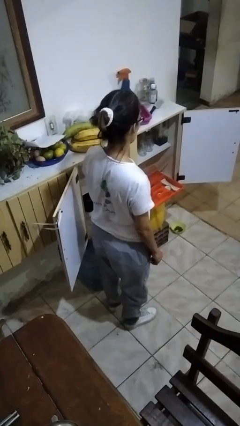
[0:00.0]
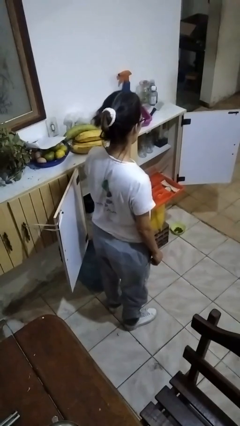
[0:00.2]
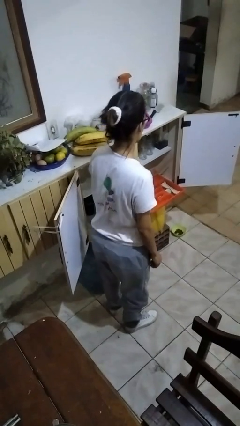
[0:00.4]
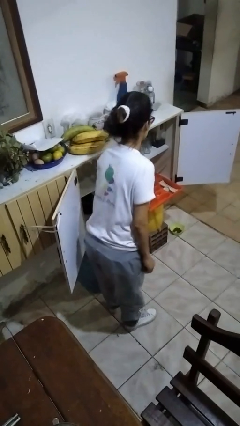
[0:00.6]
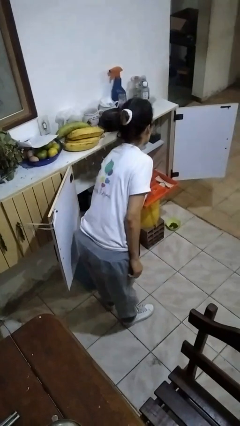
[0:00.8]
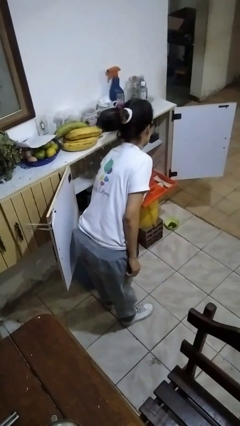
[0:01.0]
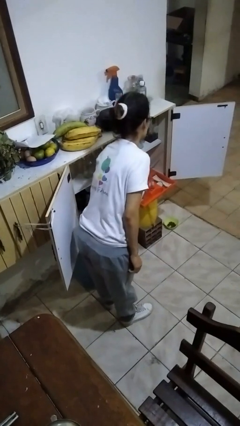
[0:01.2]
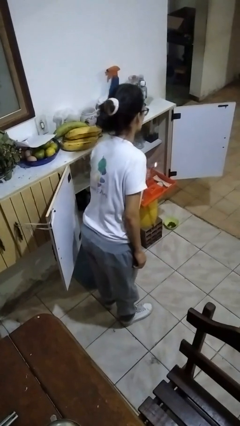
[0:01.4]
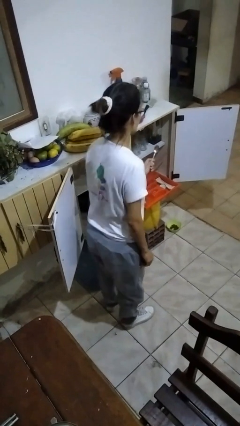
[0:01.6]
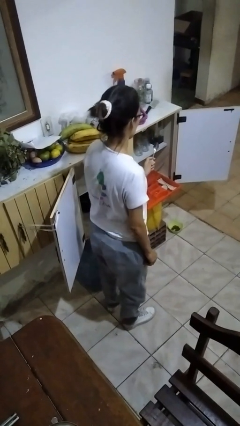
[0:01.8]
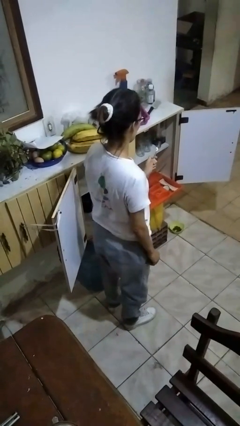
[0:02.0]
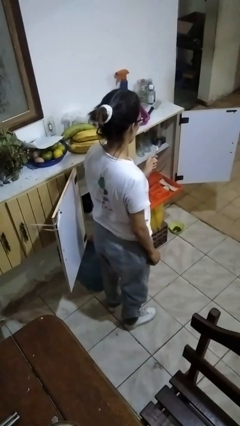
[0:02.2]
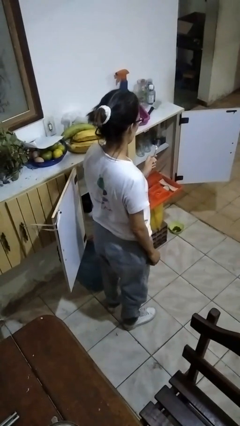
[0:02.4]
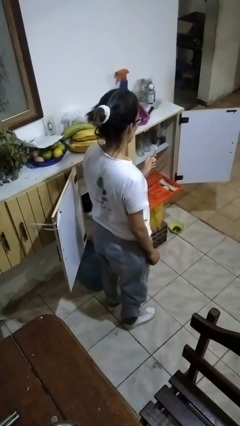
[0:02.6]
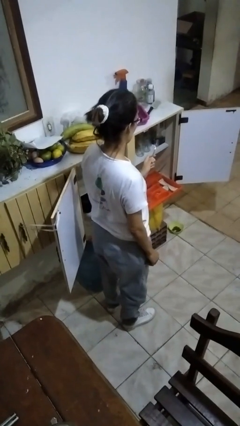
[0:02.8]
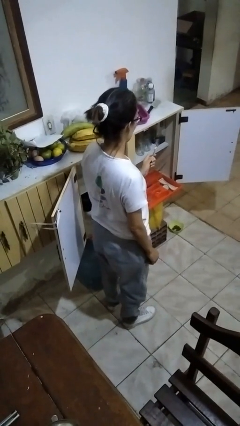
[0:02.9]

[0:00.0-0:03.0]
person takes object from kitchen drawer

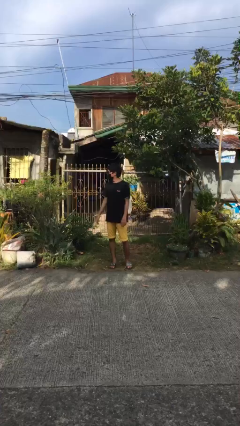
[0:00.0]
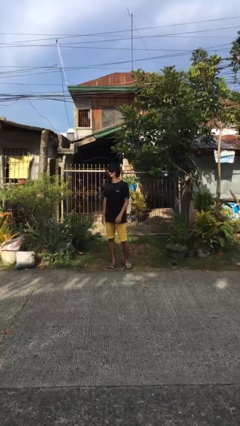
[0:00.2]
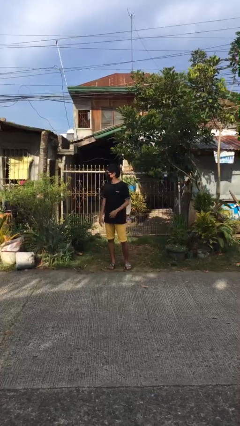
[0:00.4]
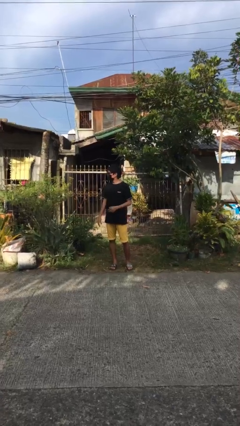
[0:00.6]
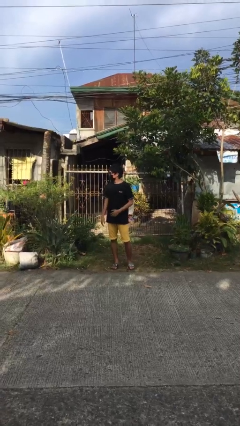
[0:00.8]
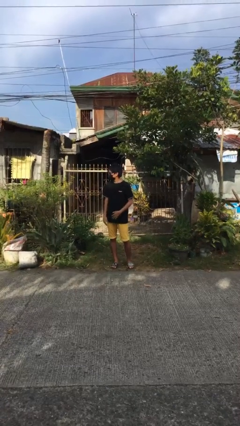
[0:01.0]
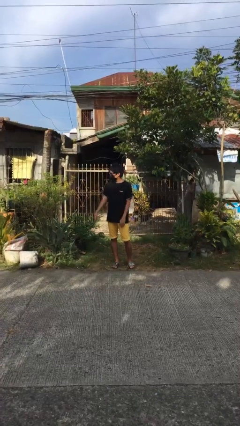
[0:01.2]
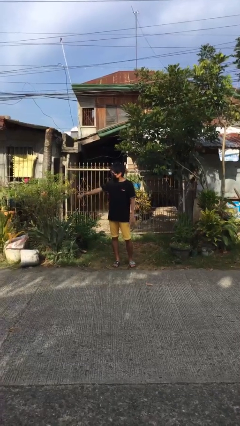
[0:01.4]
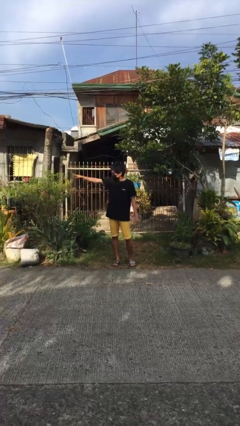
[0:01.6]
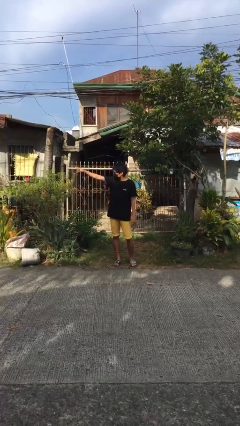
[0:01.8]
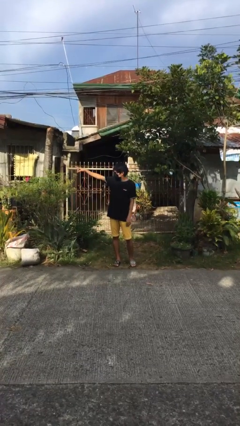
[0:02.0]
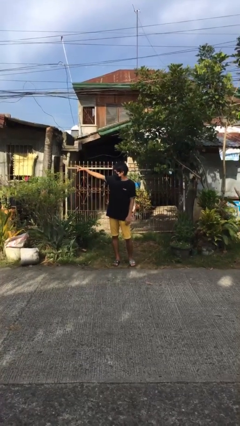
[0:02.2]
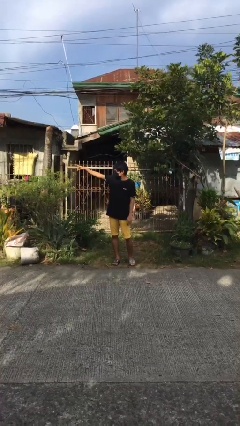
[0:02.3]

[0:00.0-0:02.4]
person points at person

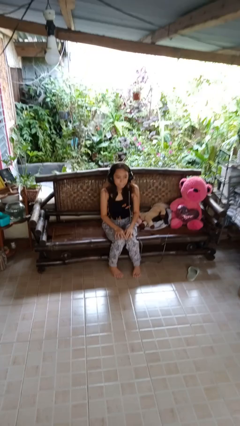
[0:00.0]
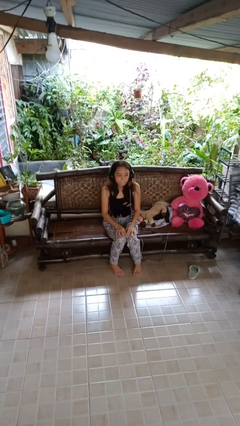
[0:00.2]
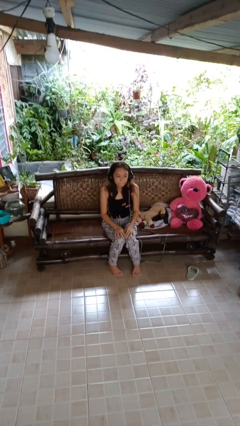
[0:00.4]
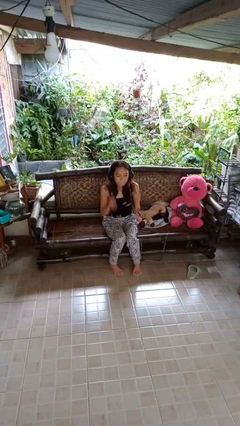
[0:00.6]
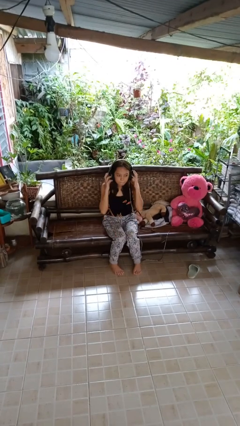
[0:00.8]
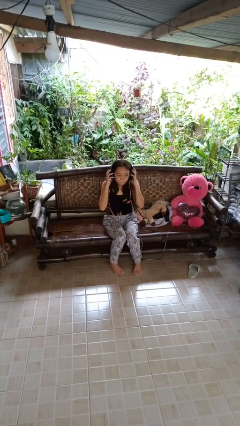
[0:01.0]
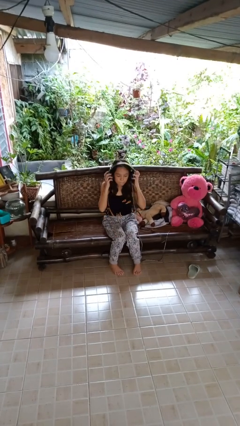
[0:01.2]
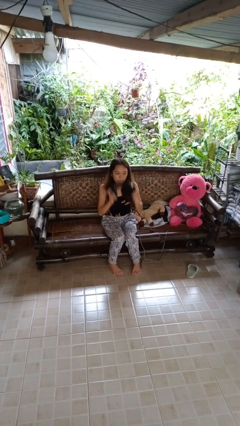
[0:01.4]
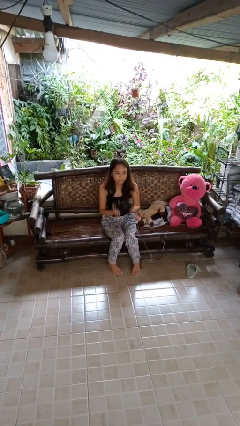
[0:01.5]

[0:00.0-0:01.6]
person takes off headphones

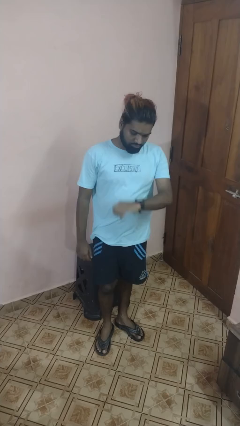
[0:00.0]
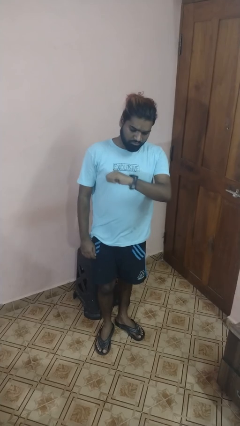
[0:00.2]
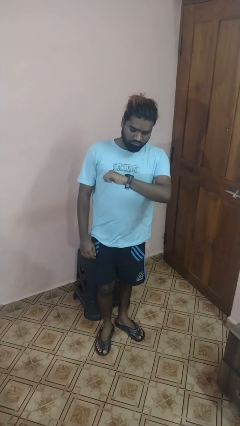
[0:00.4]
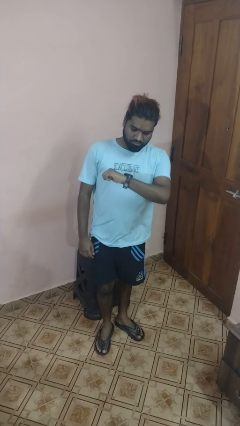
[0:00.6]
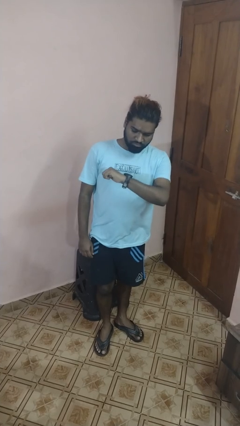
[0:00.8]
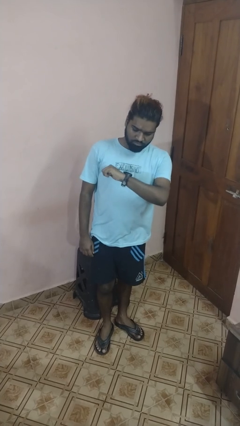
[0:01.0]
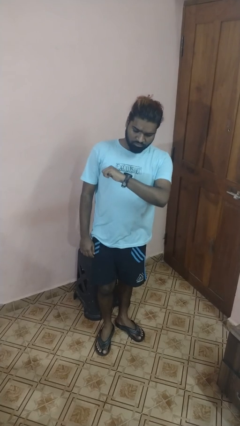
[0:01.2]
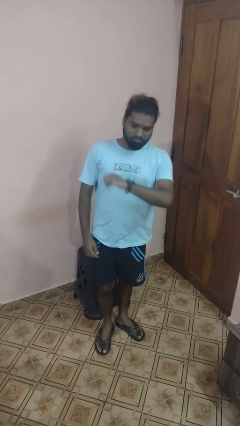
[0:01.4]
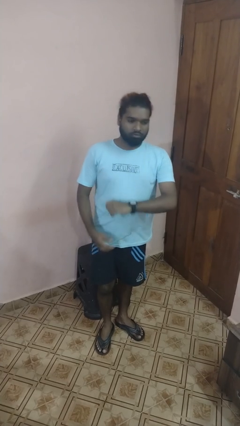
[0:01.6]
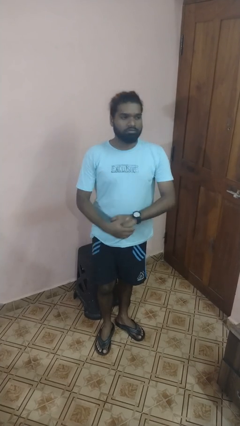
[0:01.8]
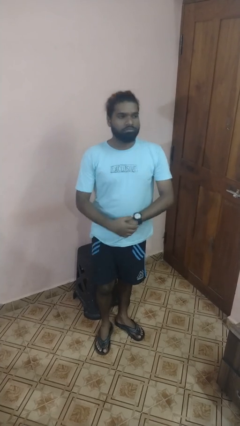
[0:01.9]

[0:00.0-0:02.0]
person looks at wristwatch

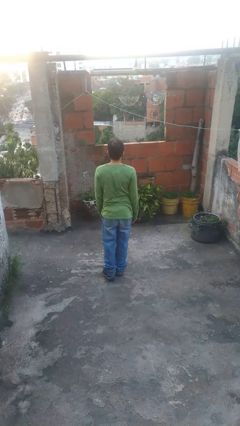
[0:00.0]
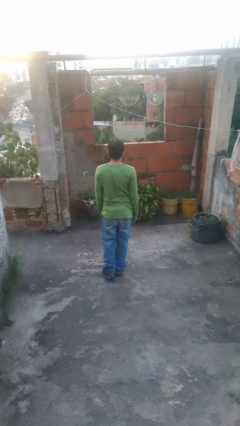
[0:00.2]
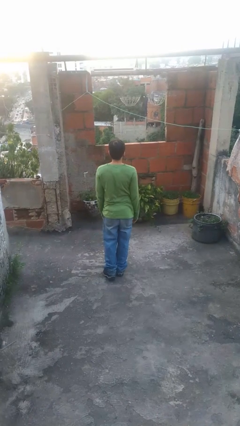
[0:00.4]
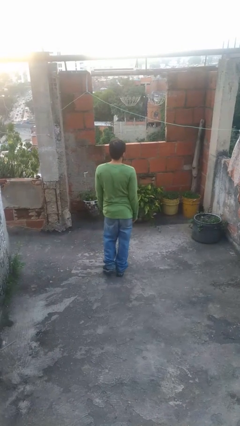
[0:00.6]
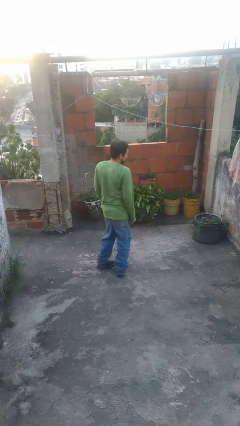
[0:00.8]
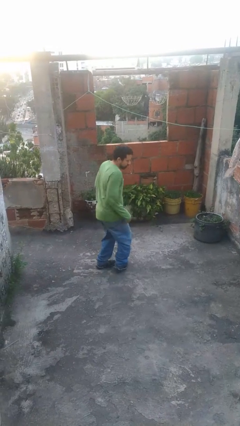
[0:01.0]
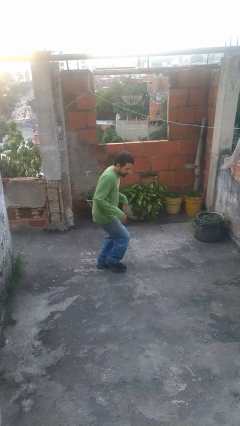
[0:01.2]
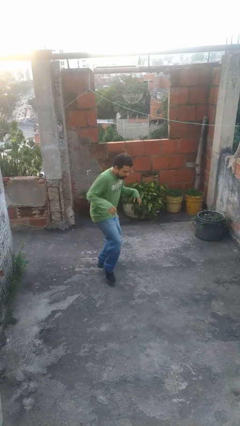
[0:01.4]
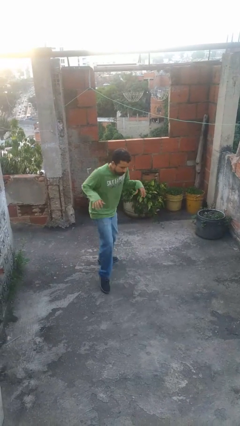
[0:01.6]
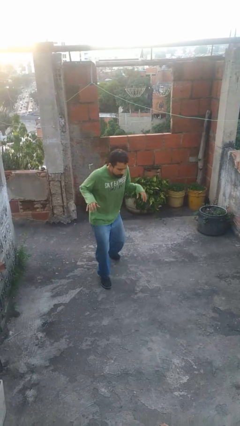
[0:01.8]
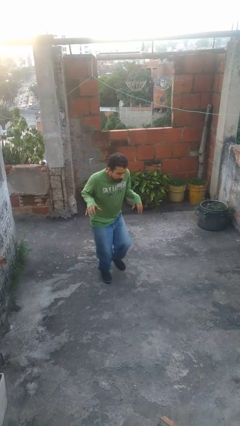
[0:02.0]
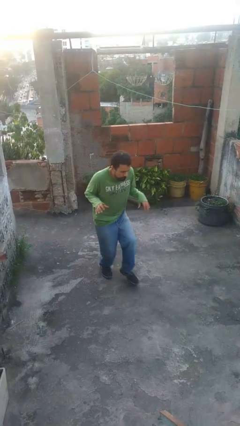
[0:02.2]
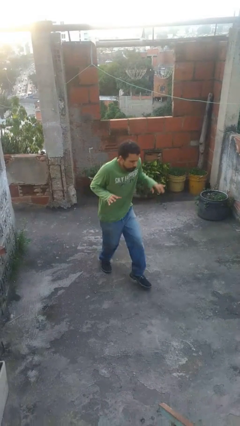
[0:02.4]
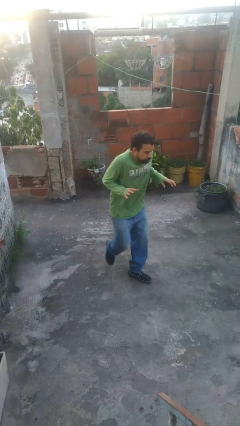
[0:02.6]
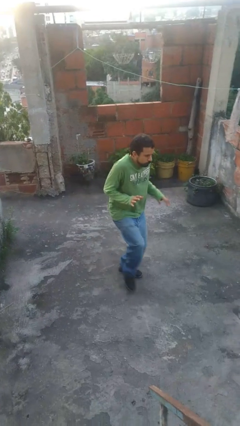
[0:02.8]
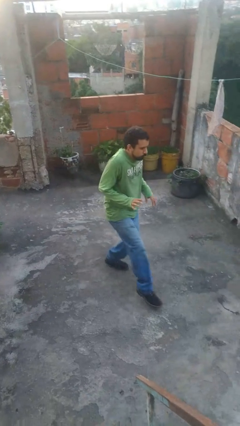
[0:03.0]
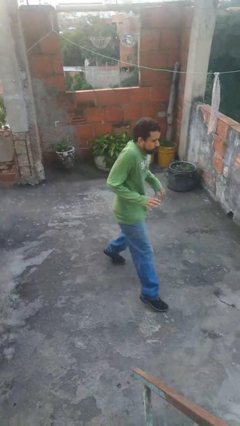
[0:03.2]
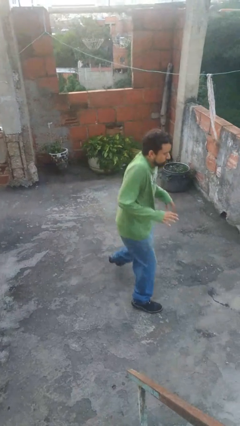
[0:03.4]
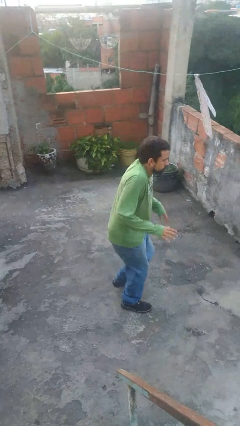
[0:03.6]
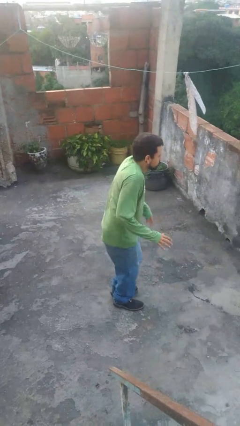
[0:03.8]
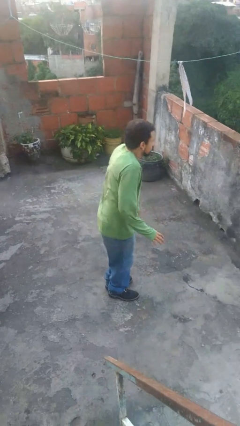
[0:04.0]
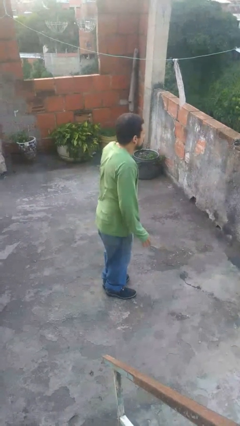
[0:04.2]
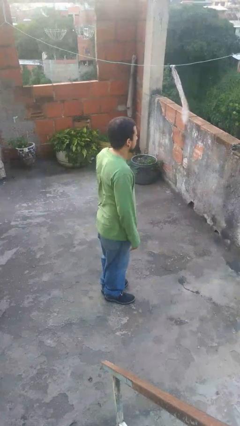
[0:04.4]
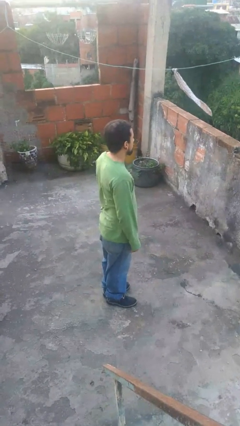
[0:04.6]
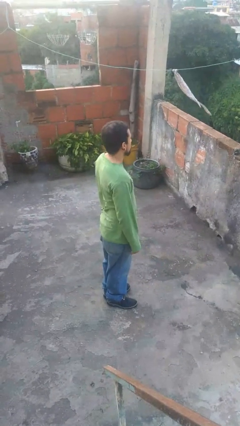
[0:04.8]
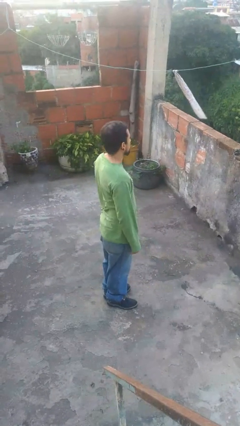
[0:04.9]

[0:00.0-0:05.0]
person walks tiptoe

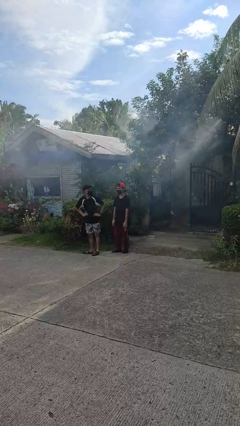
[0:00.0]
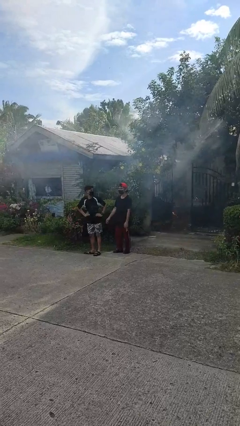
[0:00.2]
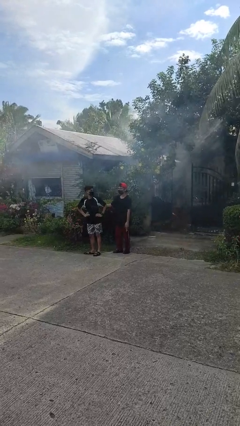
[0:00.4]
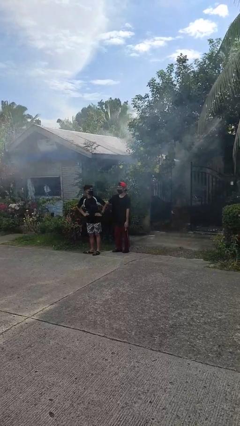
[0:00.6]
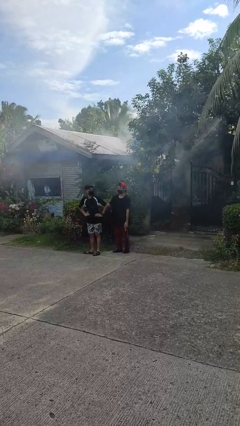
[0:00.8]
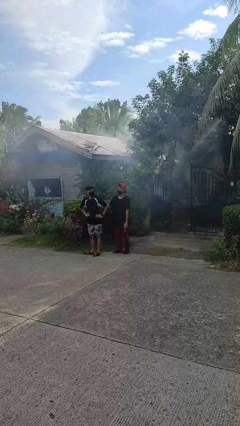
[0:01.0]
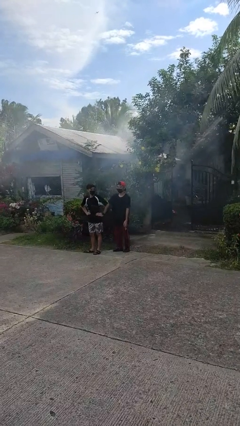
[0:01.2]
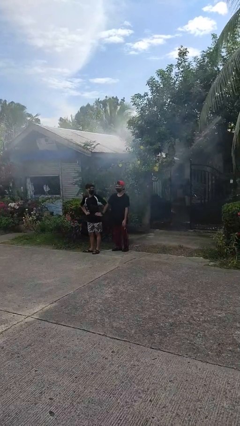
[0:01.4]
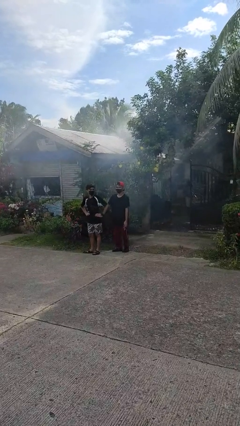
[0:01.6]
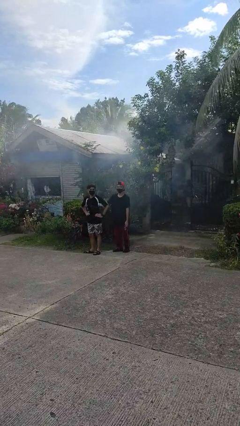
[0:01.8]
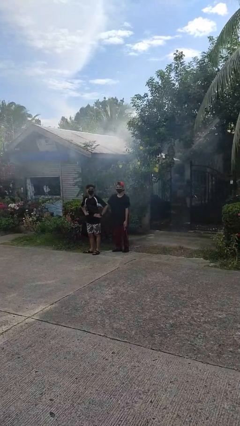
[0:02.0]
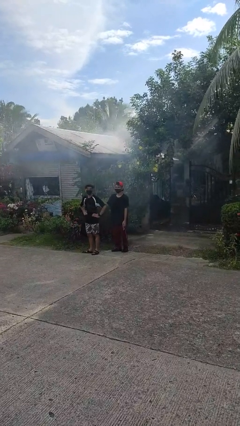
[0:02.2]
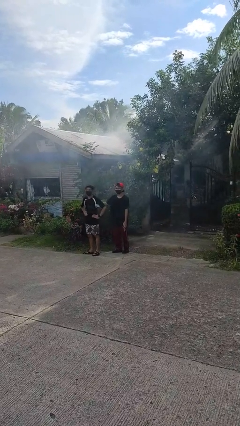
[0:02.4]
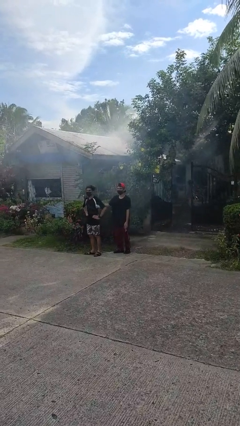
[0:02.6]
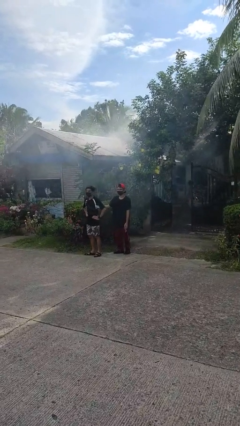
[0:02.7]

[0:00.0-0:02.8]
person touches back of person

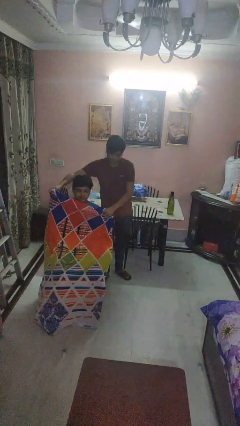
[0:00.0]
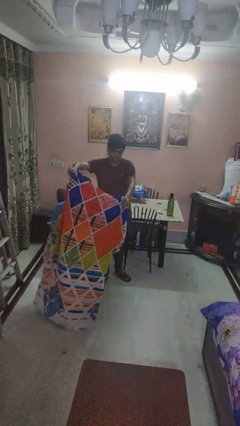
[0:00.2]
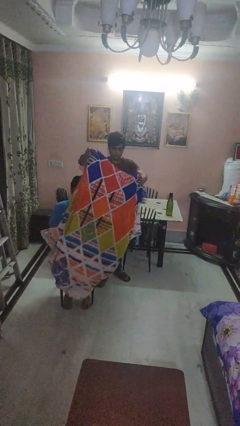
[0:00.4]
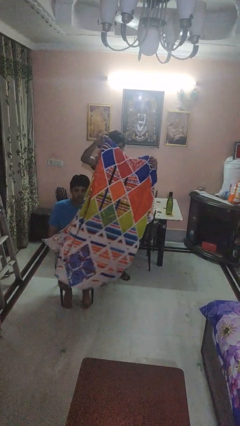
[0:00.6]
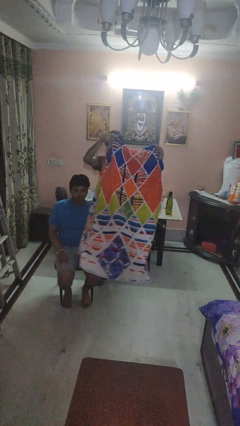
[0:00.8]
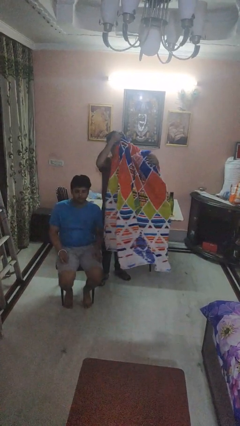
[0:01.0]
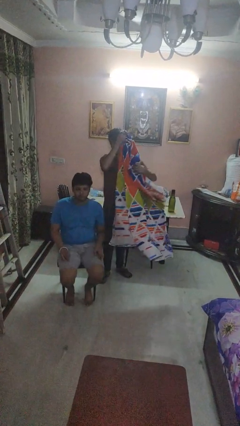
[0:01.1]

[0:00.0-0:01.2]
person uncovers friend with blanket
